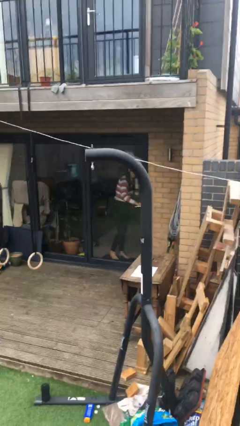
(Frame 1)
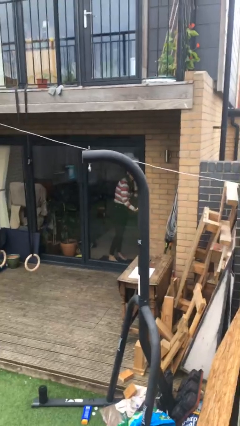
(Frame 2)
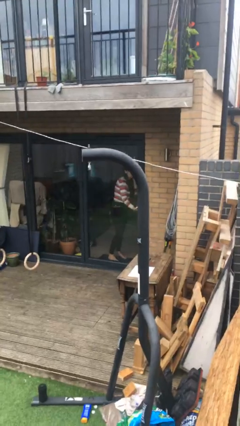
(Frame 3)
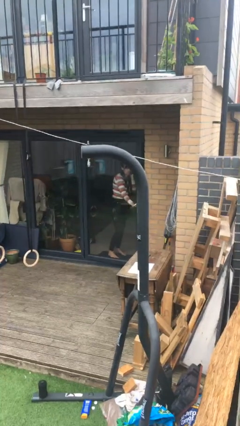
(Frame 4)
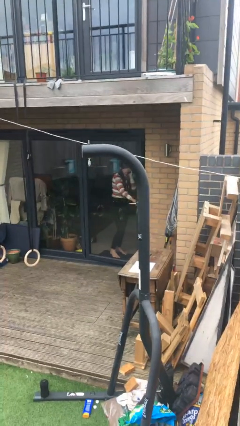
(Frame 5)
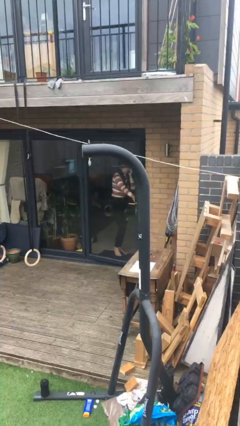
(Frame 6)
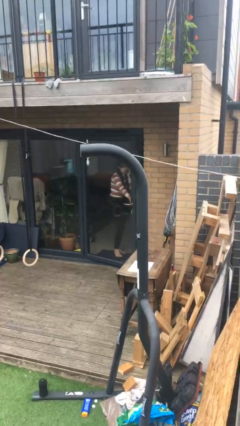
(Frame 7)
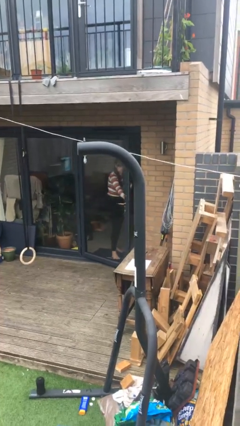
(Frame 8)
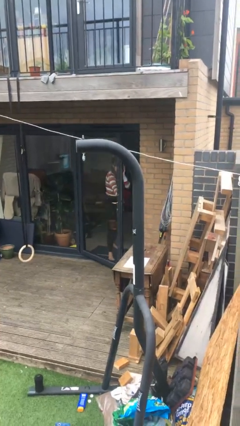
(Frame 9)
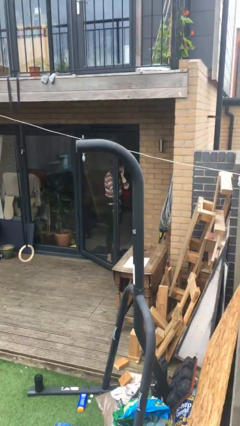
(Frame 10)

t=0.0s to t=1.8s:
person opens facility door

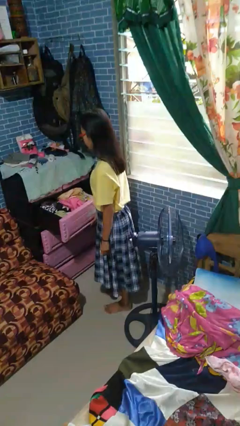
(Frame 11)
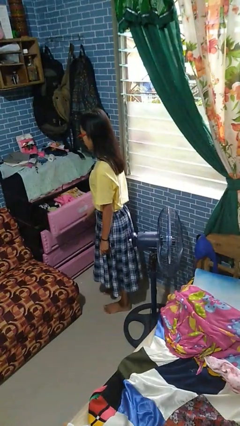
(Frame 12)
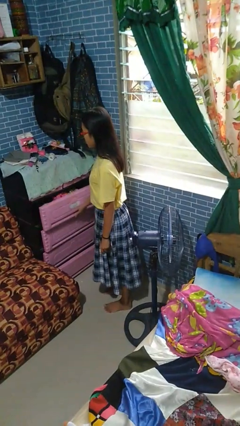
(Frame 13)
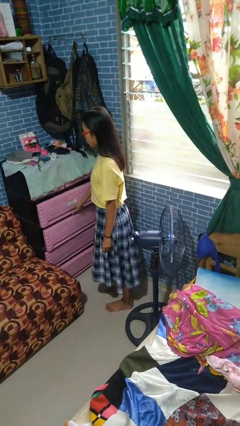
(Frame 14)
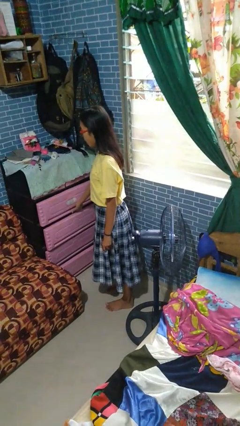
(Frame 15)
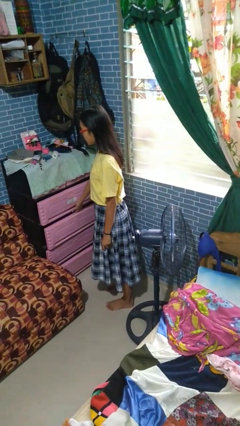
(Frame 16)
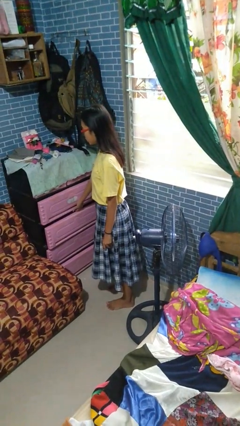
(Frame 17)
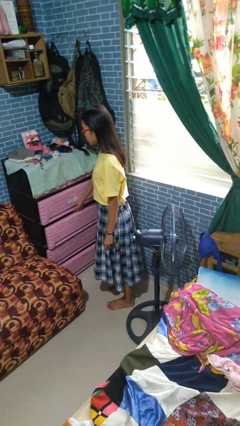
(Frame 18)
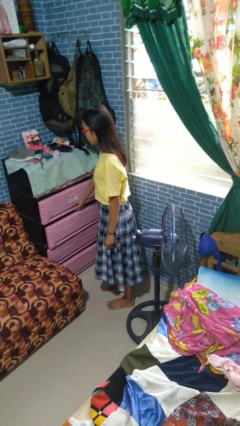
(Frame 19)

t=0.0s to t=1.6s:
person closes dresser drawer

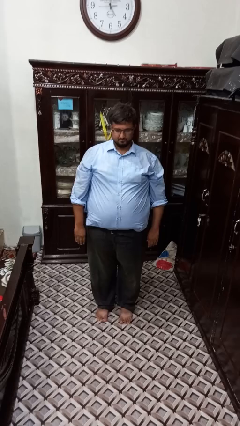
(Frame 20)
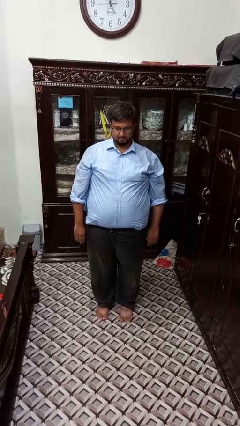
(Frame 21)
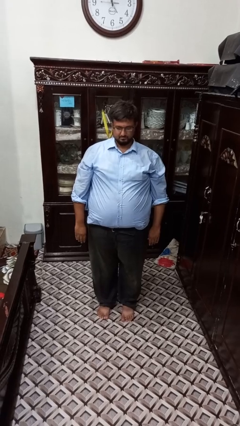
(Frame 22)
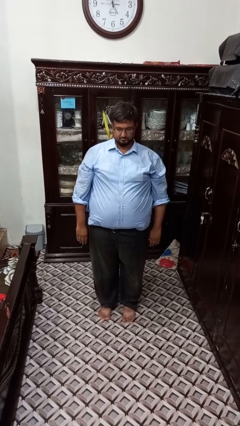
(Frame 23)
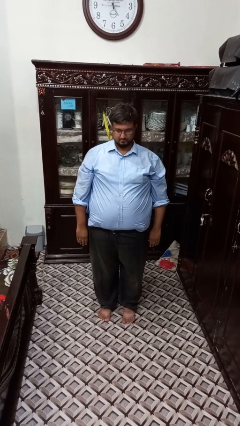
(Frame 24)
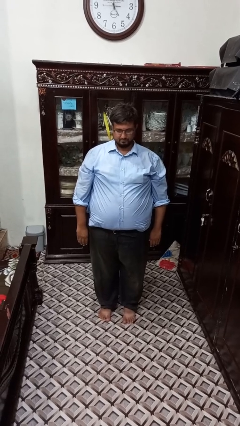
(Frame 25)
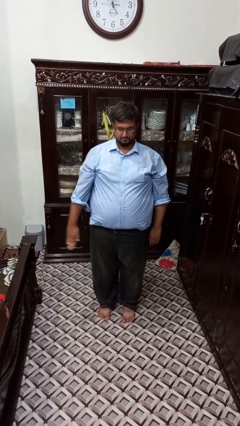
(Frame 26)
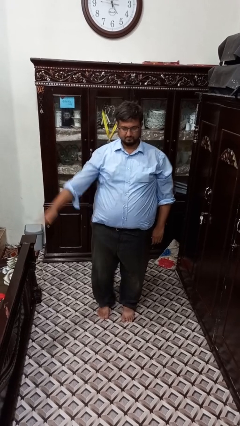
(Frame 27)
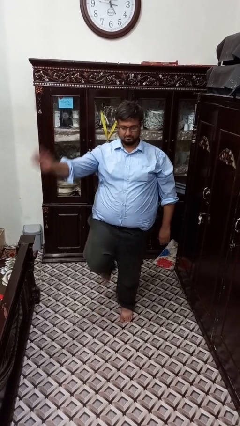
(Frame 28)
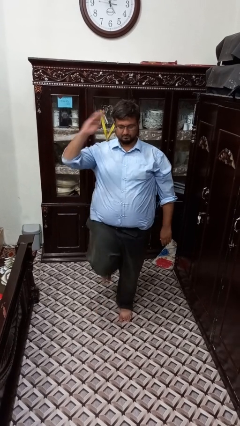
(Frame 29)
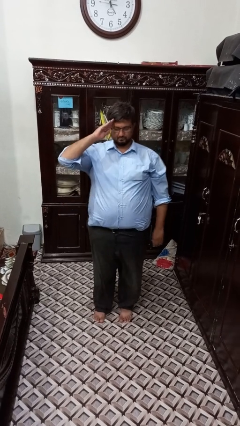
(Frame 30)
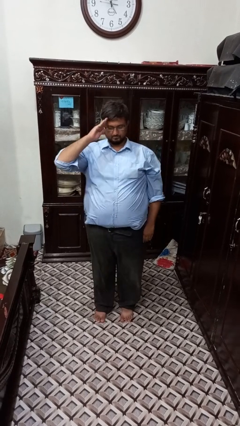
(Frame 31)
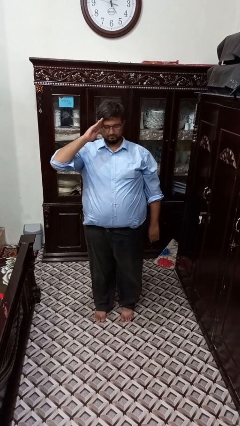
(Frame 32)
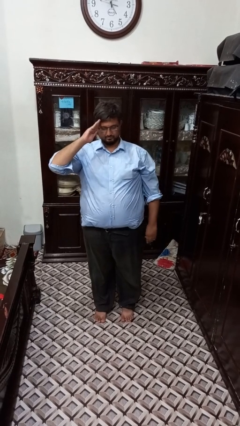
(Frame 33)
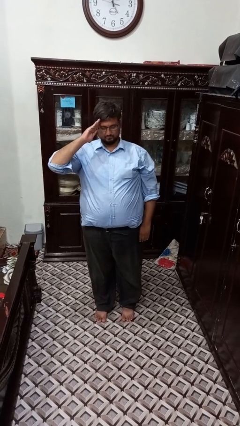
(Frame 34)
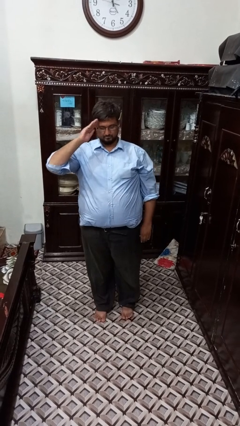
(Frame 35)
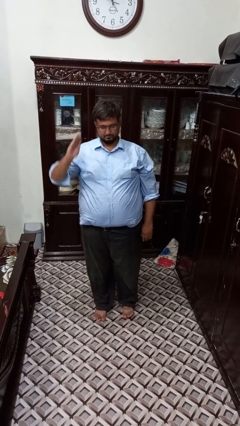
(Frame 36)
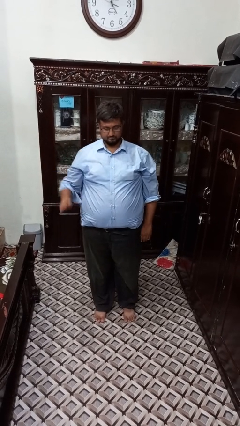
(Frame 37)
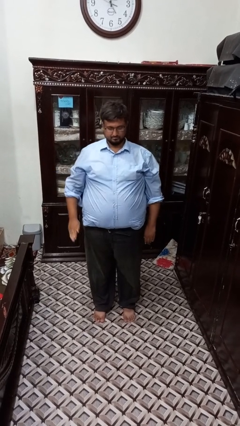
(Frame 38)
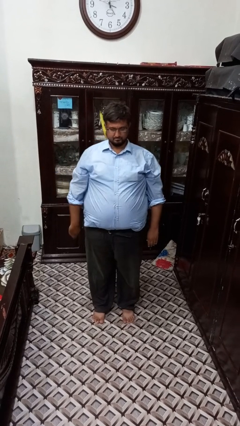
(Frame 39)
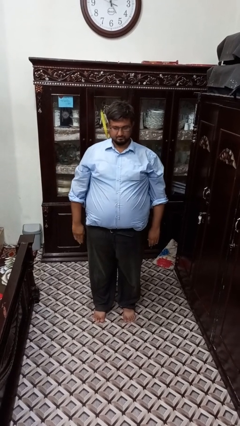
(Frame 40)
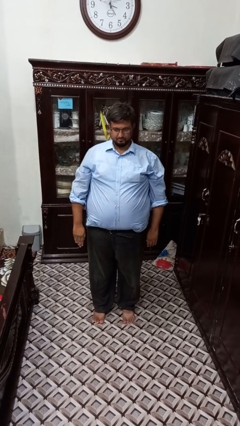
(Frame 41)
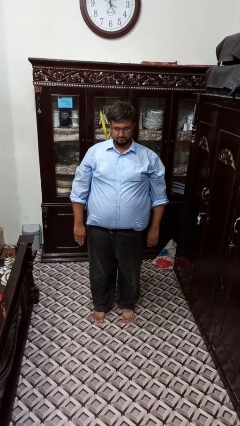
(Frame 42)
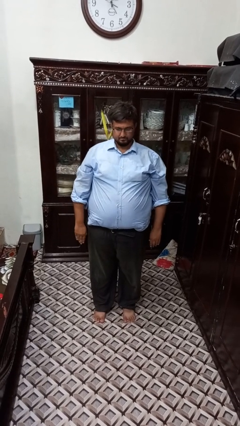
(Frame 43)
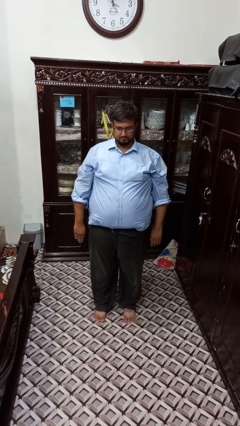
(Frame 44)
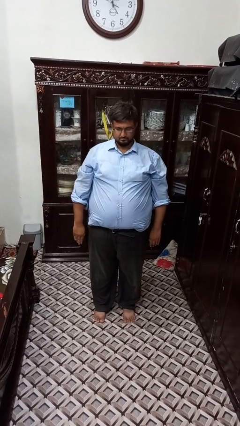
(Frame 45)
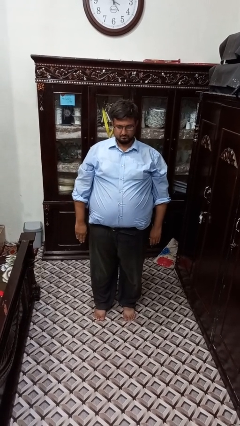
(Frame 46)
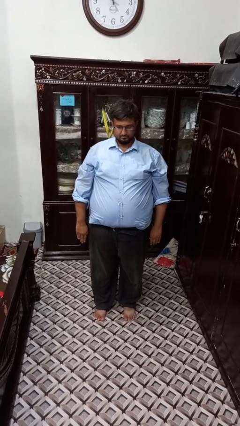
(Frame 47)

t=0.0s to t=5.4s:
person salutes

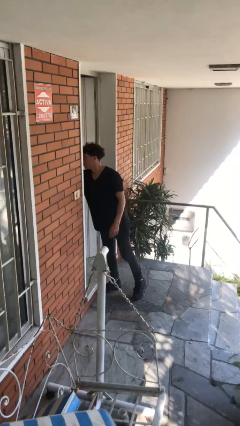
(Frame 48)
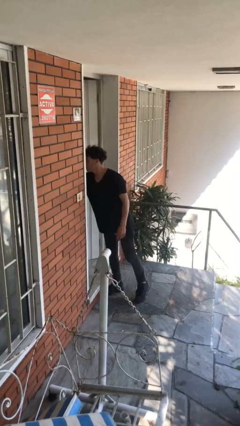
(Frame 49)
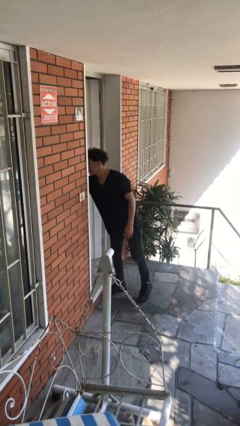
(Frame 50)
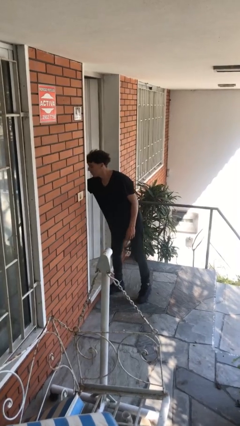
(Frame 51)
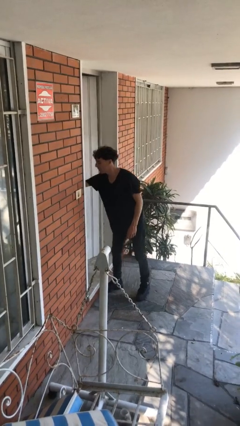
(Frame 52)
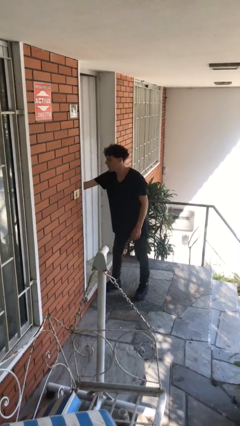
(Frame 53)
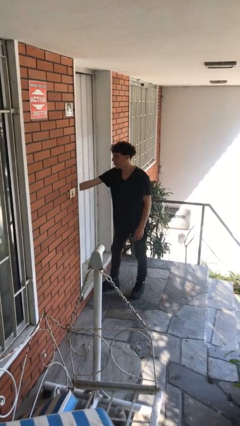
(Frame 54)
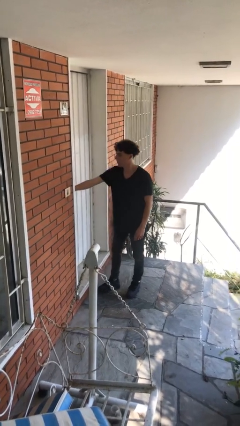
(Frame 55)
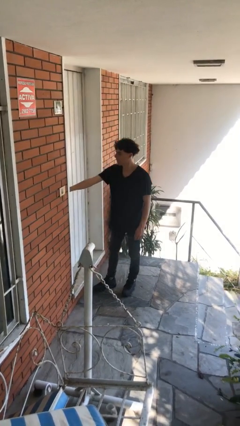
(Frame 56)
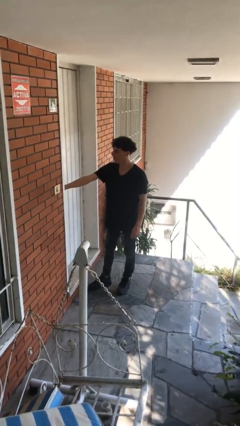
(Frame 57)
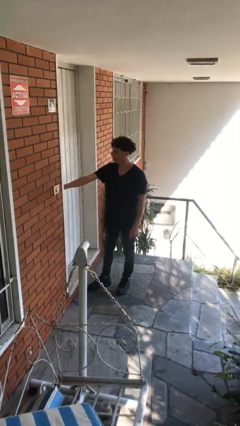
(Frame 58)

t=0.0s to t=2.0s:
person closes facility door

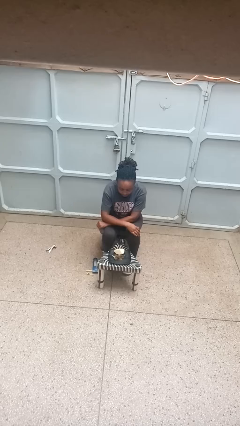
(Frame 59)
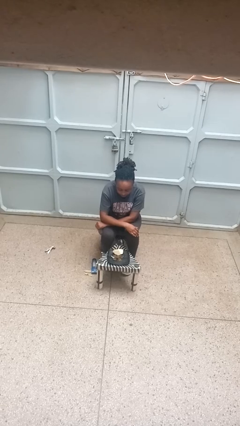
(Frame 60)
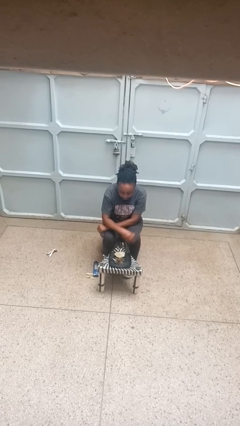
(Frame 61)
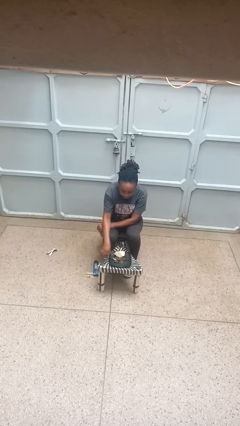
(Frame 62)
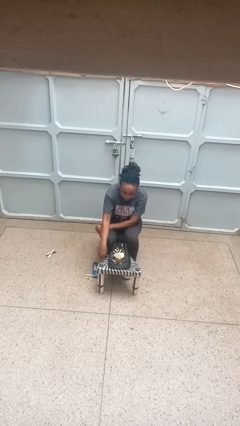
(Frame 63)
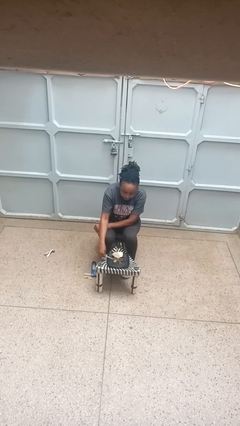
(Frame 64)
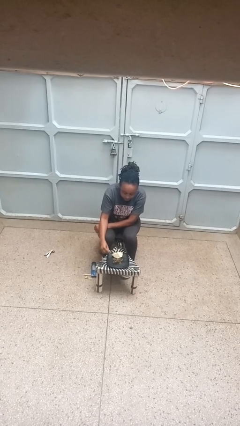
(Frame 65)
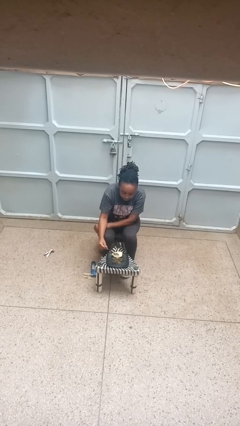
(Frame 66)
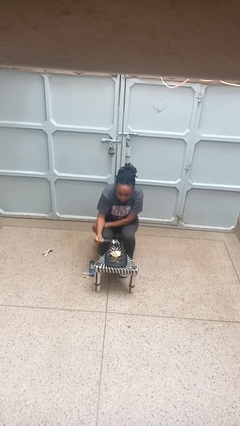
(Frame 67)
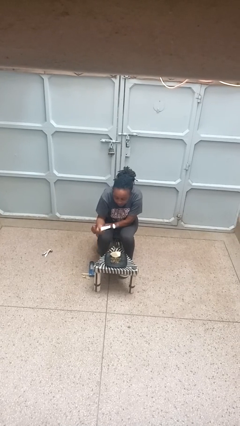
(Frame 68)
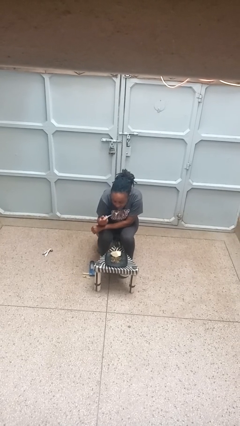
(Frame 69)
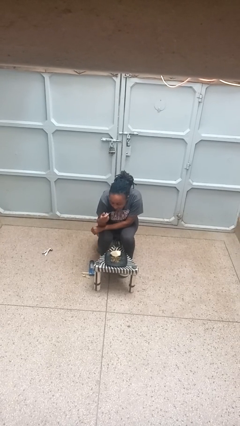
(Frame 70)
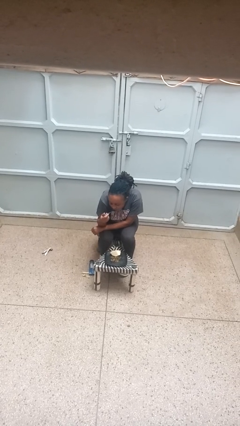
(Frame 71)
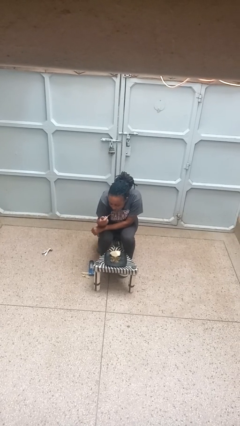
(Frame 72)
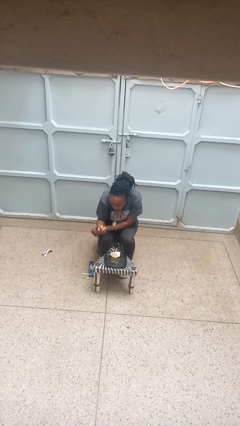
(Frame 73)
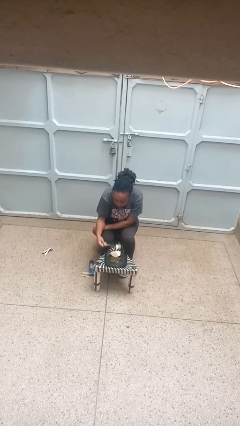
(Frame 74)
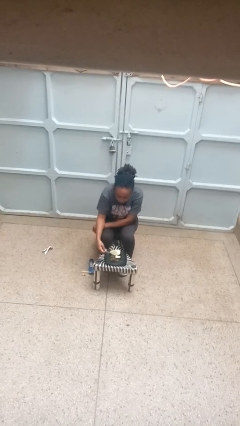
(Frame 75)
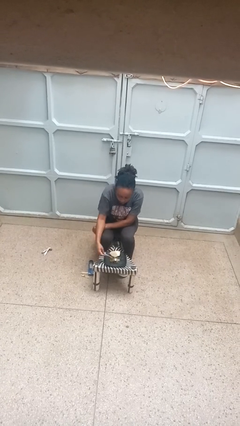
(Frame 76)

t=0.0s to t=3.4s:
person eats with utensil

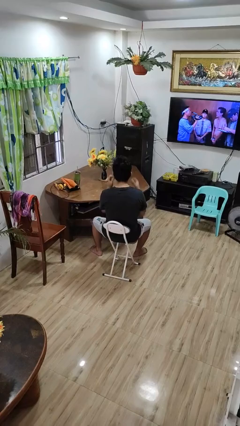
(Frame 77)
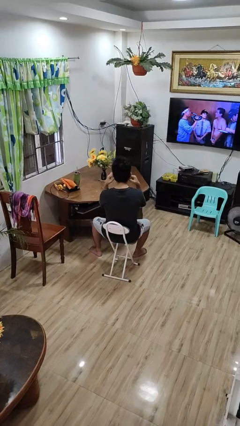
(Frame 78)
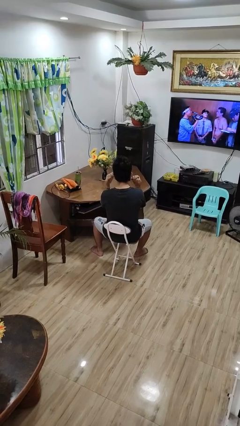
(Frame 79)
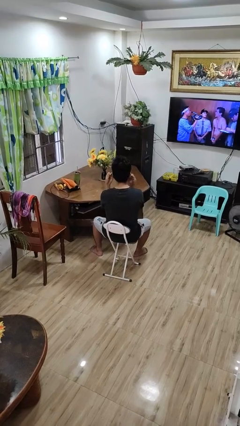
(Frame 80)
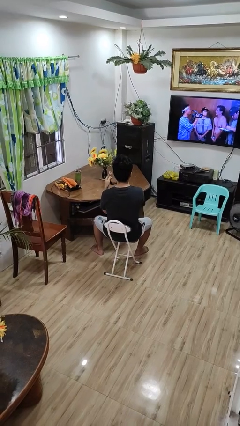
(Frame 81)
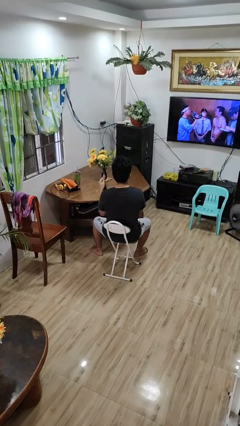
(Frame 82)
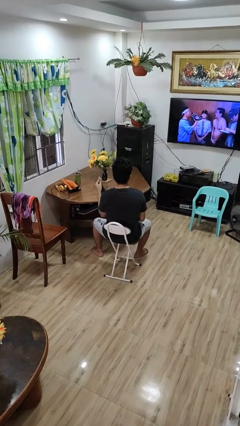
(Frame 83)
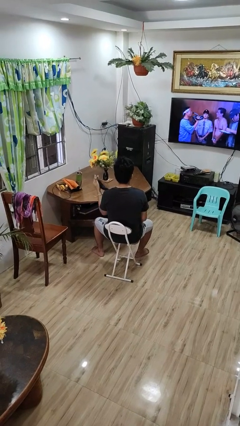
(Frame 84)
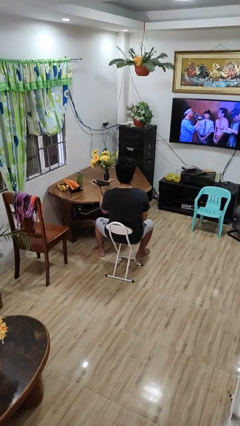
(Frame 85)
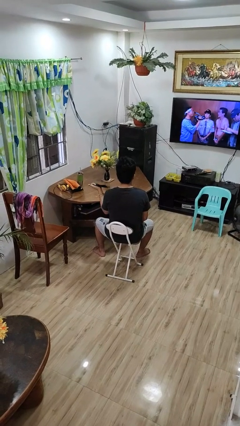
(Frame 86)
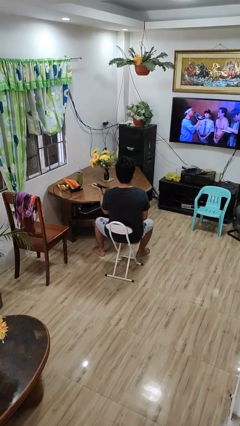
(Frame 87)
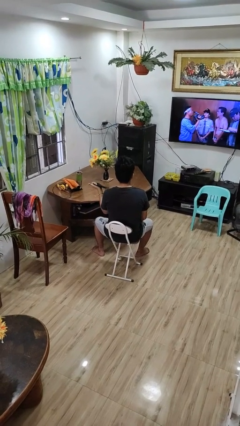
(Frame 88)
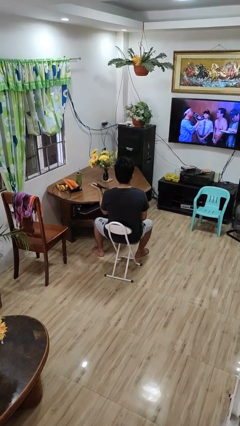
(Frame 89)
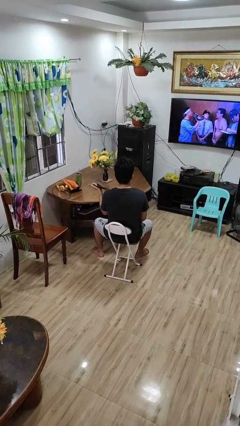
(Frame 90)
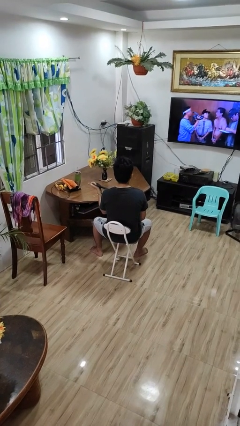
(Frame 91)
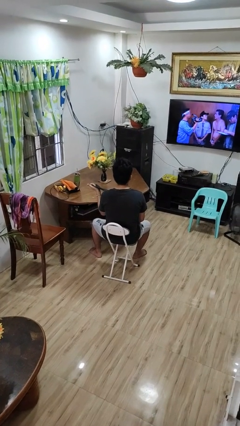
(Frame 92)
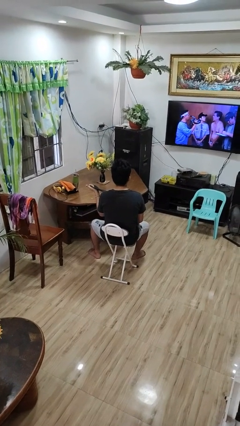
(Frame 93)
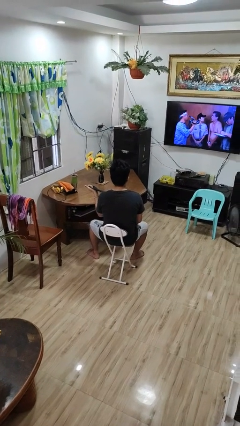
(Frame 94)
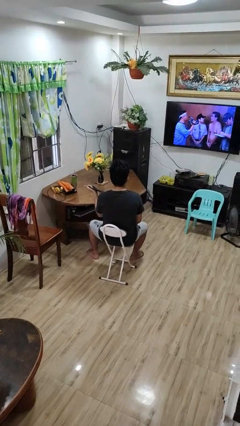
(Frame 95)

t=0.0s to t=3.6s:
person takes off facemask
